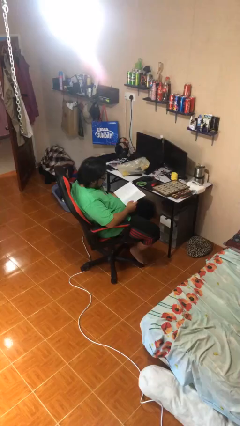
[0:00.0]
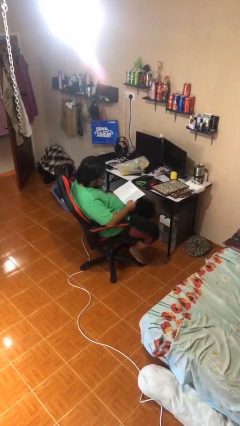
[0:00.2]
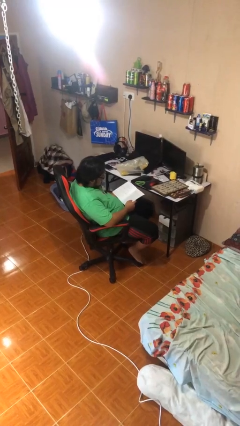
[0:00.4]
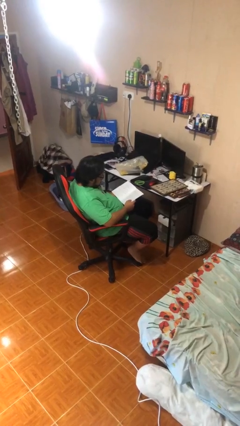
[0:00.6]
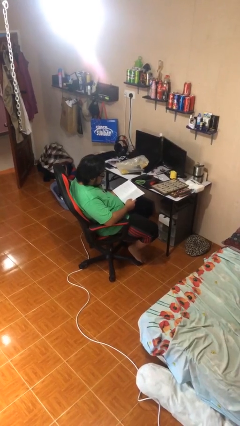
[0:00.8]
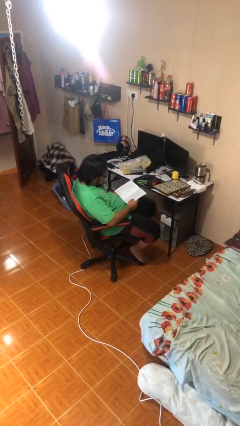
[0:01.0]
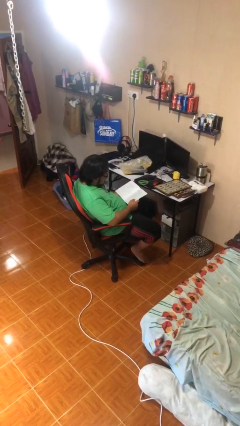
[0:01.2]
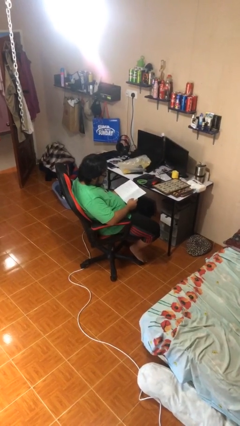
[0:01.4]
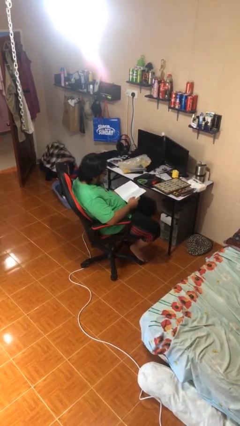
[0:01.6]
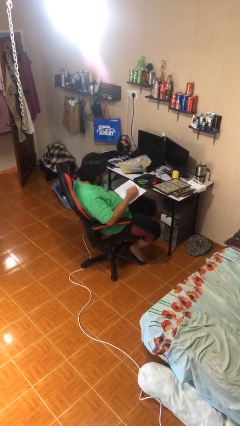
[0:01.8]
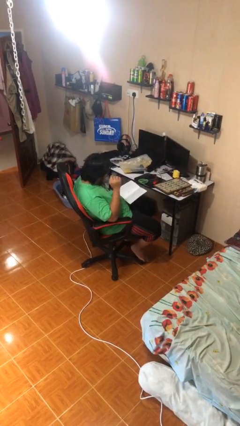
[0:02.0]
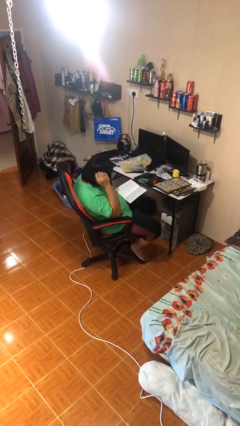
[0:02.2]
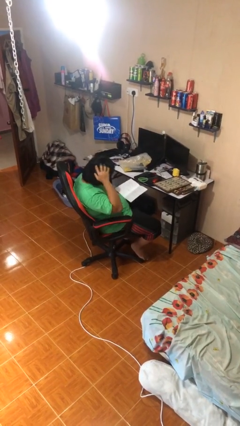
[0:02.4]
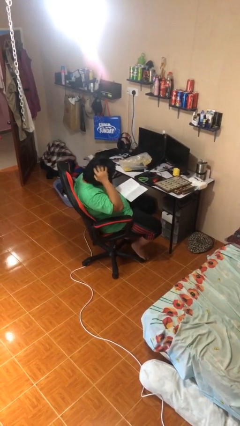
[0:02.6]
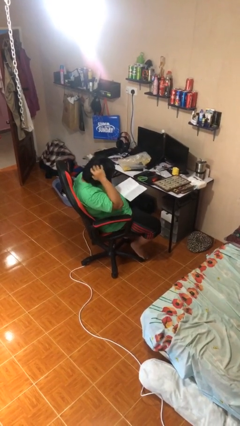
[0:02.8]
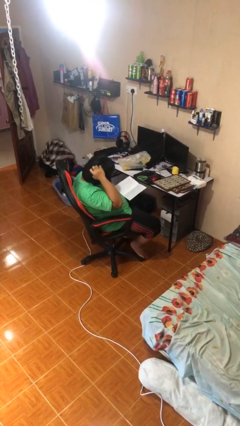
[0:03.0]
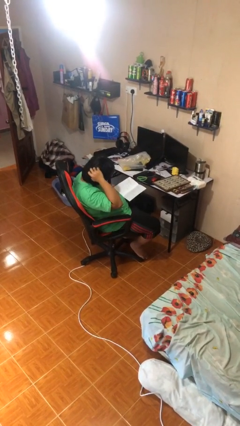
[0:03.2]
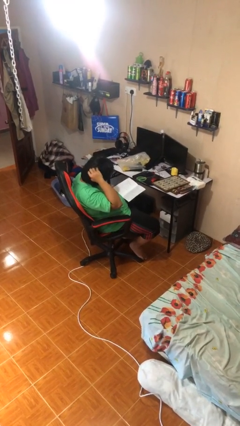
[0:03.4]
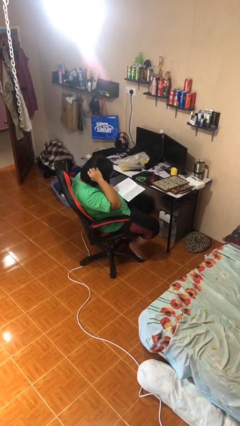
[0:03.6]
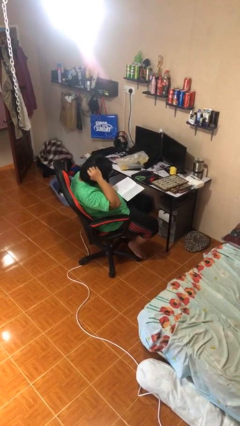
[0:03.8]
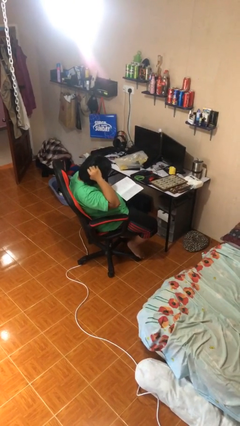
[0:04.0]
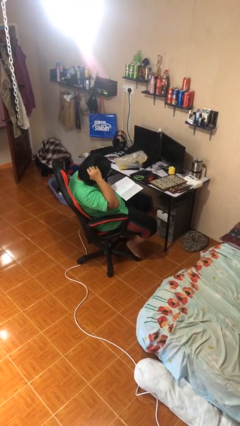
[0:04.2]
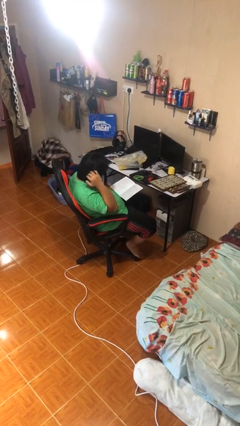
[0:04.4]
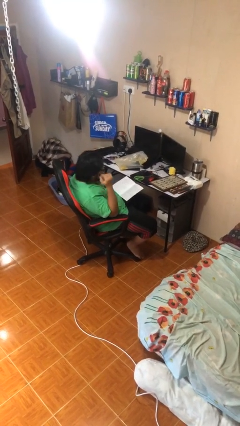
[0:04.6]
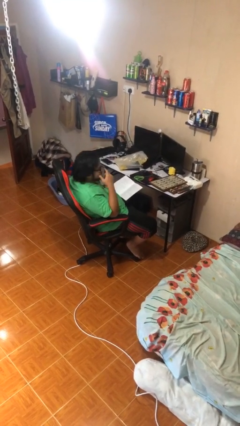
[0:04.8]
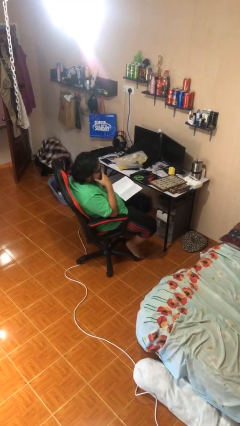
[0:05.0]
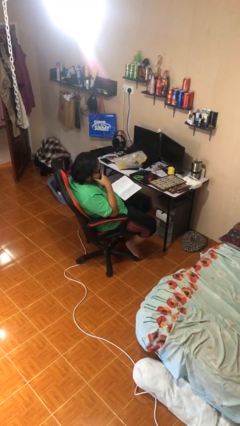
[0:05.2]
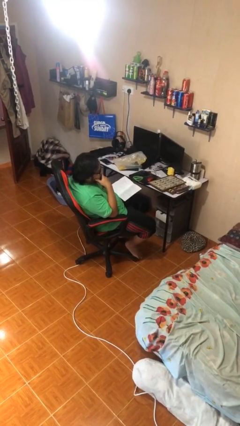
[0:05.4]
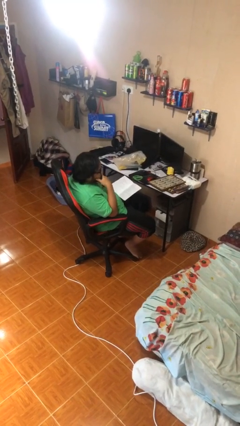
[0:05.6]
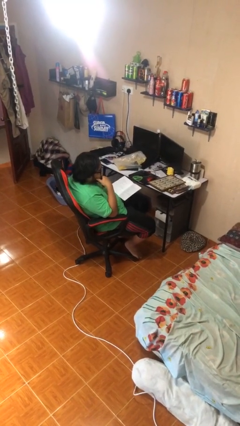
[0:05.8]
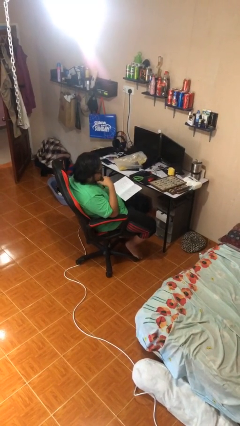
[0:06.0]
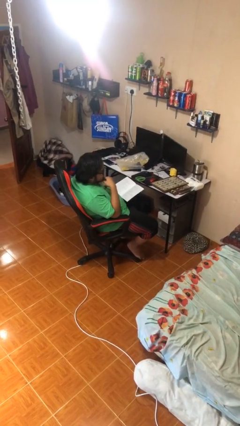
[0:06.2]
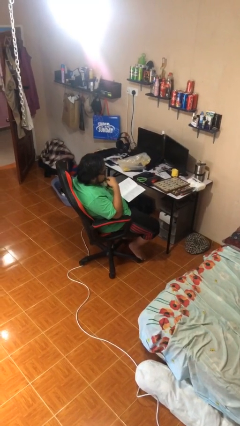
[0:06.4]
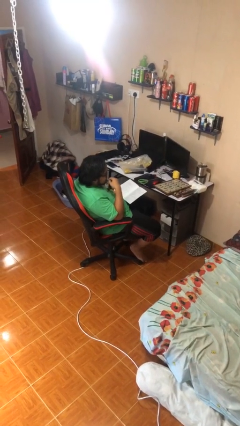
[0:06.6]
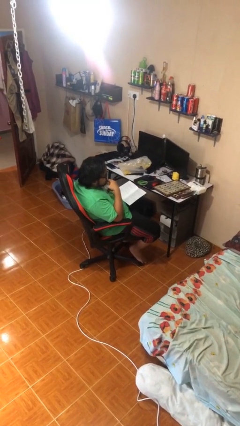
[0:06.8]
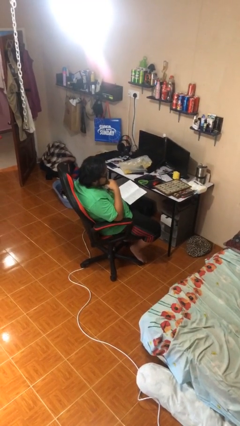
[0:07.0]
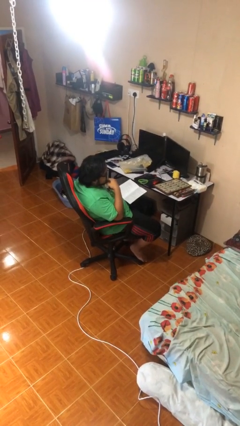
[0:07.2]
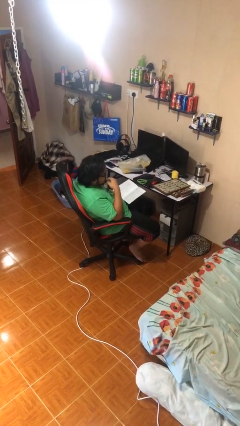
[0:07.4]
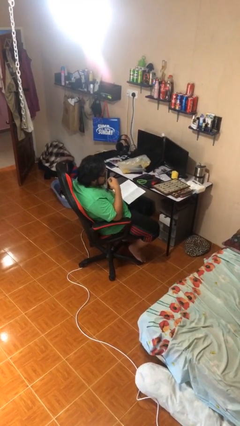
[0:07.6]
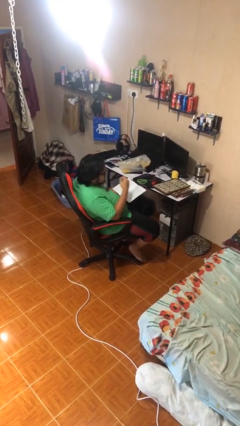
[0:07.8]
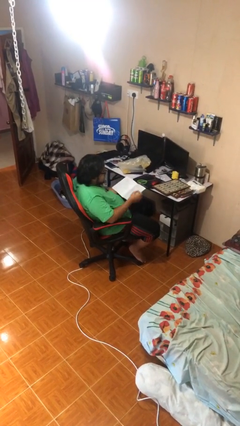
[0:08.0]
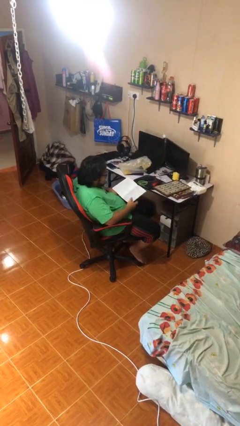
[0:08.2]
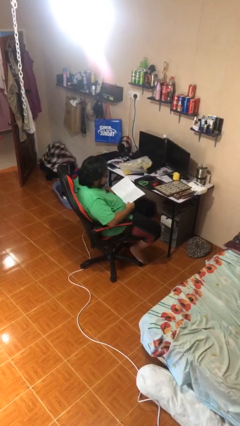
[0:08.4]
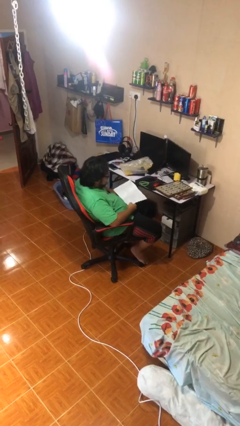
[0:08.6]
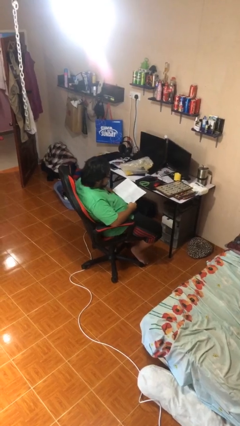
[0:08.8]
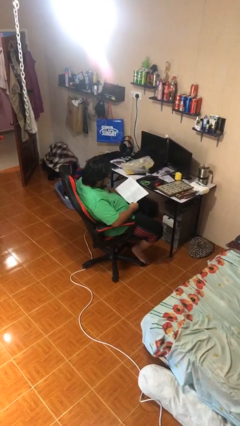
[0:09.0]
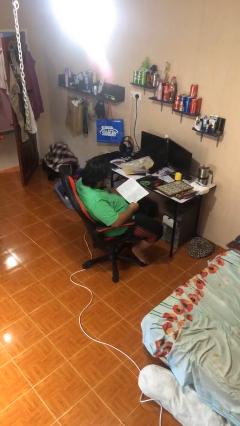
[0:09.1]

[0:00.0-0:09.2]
person reads document

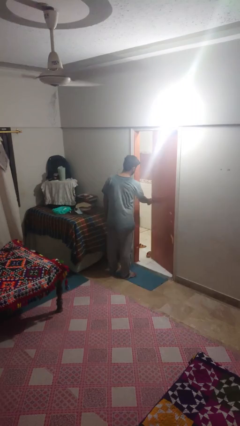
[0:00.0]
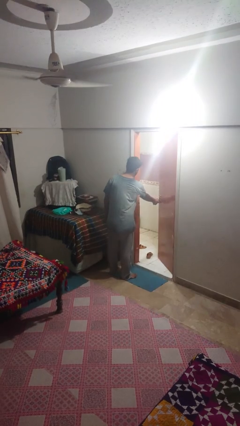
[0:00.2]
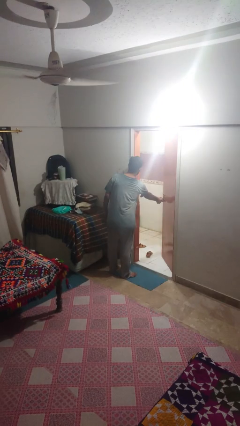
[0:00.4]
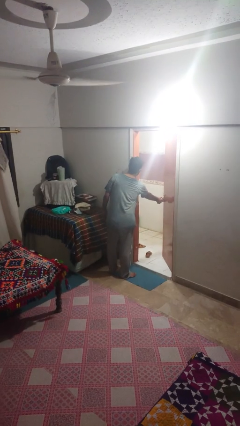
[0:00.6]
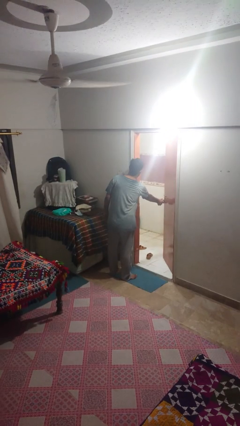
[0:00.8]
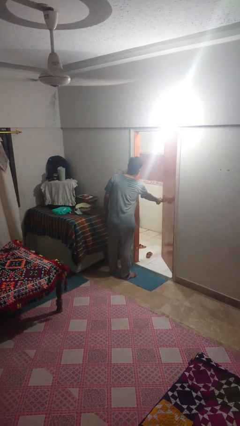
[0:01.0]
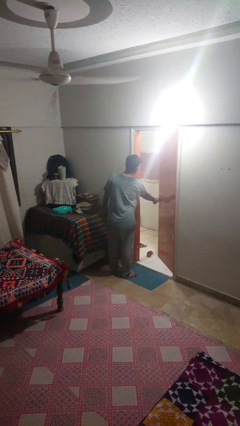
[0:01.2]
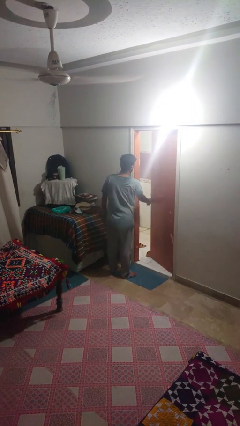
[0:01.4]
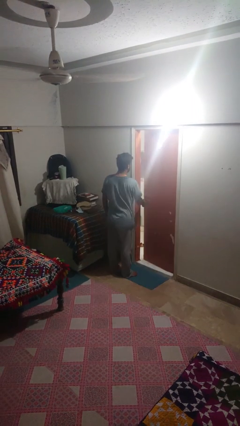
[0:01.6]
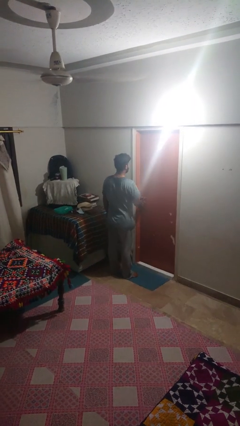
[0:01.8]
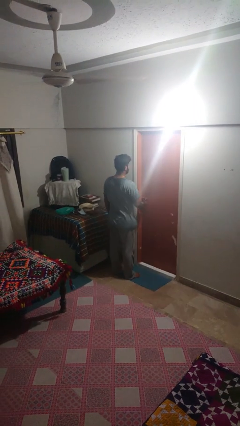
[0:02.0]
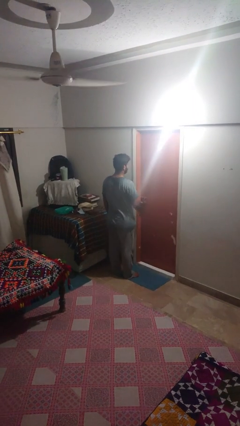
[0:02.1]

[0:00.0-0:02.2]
person closes facility door

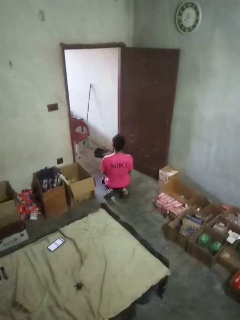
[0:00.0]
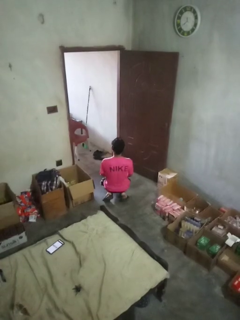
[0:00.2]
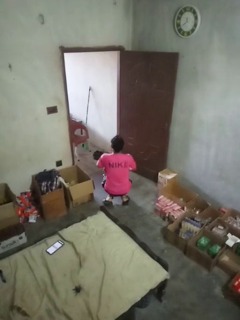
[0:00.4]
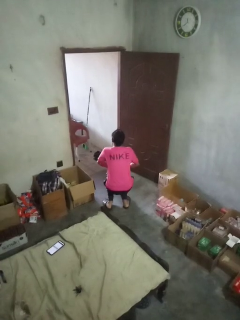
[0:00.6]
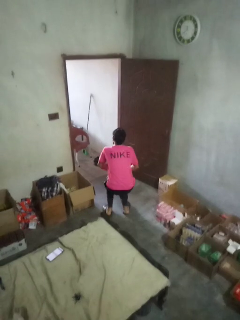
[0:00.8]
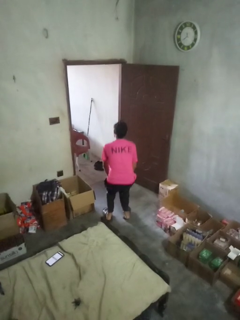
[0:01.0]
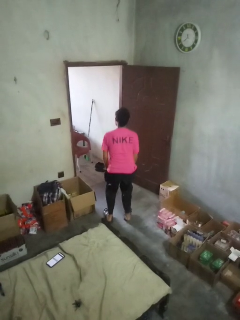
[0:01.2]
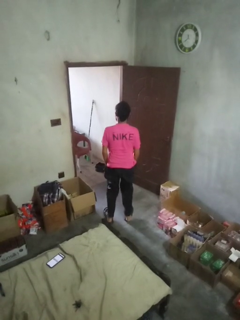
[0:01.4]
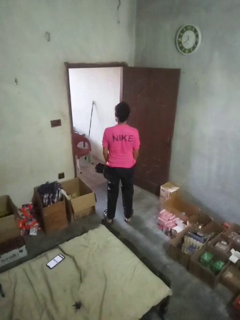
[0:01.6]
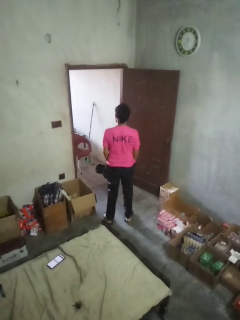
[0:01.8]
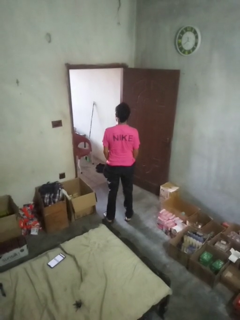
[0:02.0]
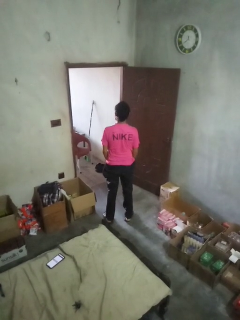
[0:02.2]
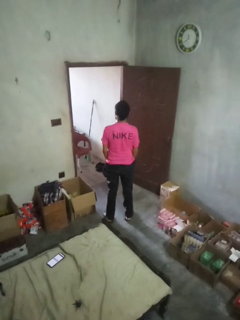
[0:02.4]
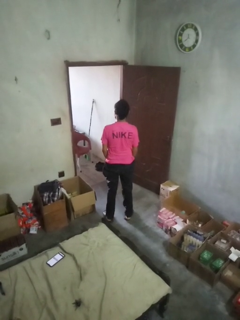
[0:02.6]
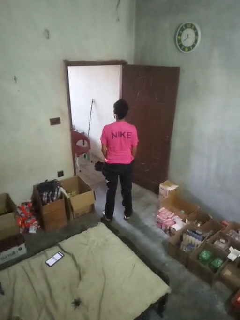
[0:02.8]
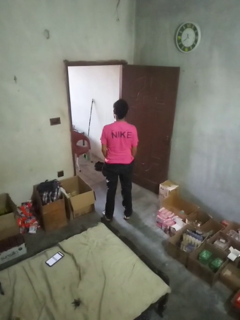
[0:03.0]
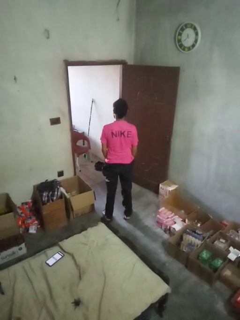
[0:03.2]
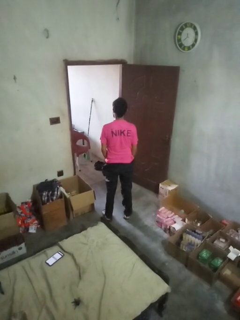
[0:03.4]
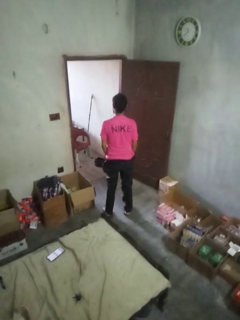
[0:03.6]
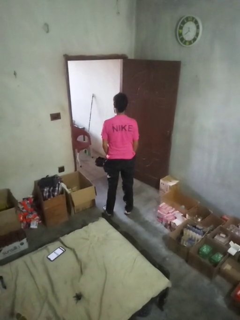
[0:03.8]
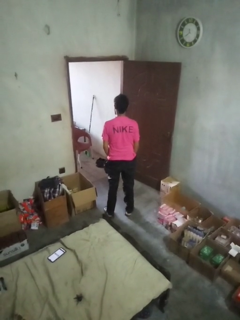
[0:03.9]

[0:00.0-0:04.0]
person stands up from floor

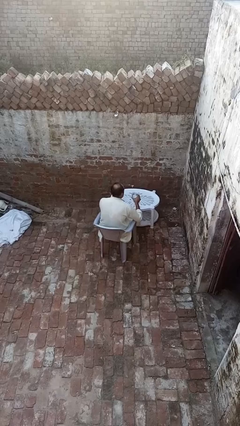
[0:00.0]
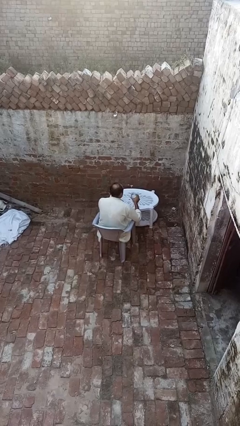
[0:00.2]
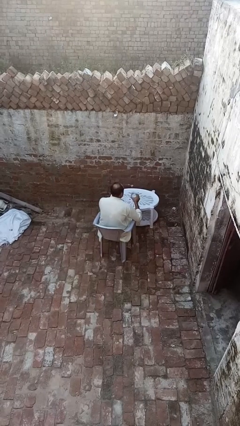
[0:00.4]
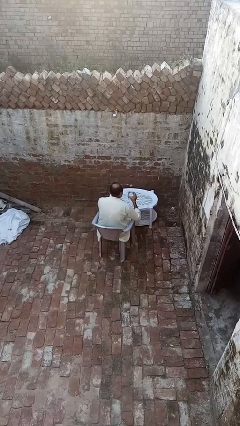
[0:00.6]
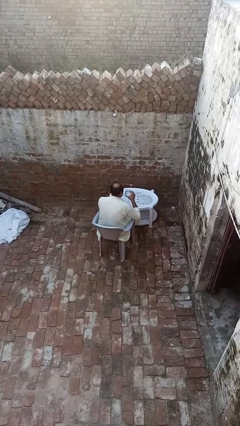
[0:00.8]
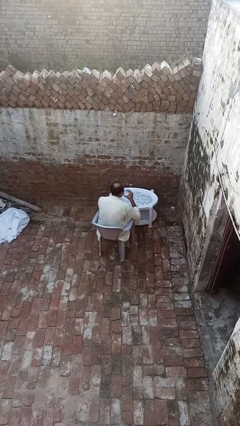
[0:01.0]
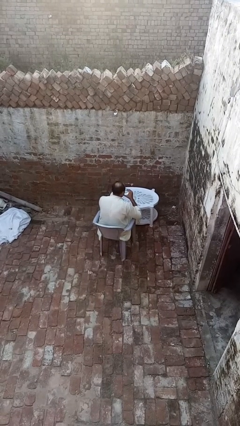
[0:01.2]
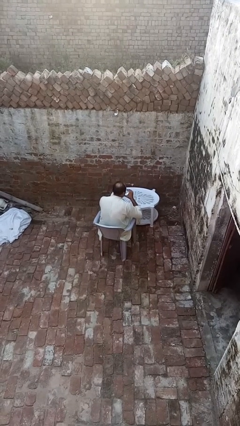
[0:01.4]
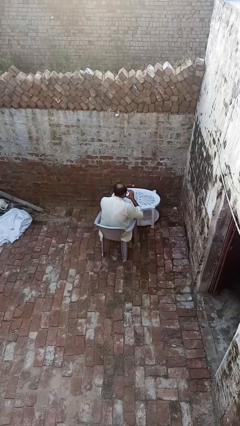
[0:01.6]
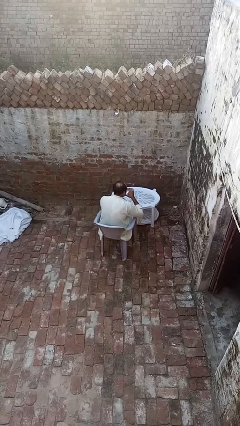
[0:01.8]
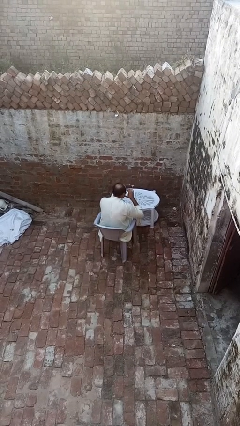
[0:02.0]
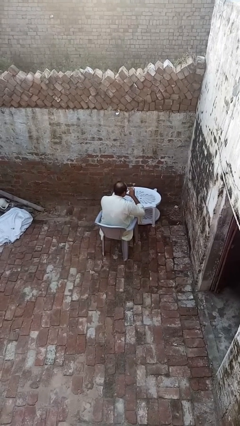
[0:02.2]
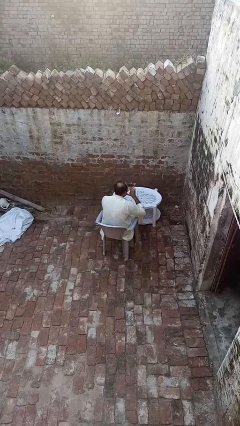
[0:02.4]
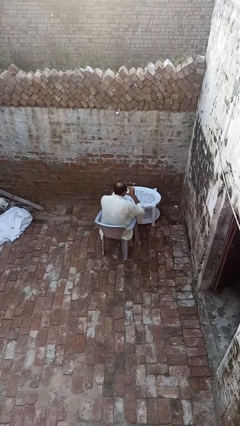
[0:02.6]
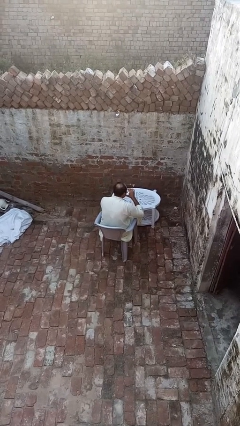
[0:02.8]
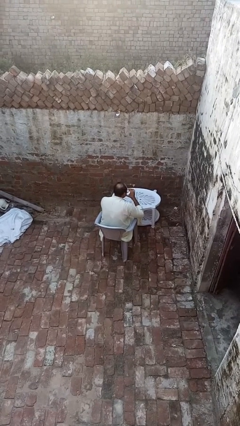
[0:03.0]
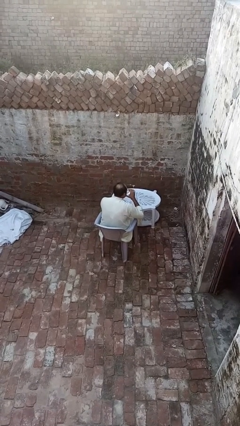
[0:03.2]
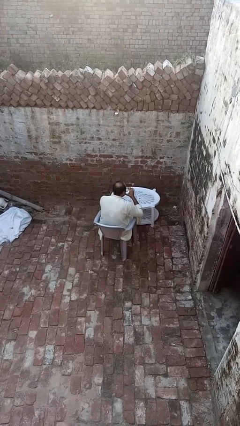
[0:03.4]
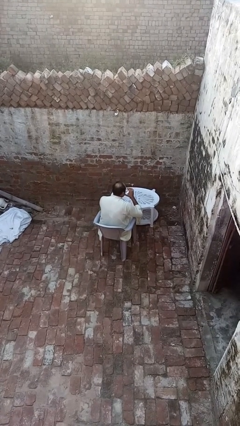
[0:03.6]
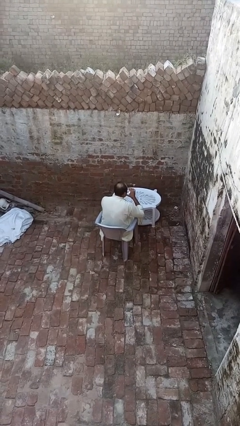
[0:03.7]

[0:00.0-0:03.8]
person drinks from shotglass
